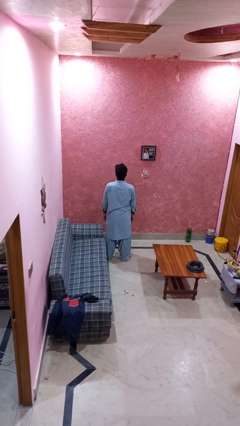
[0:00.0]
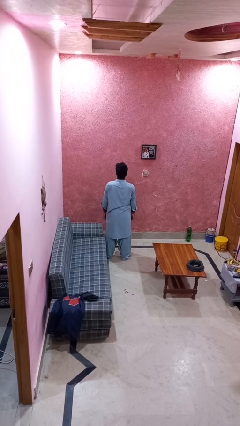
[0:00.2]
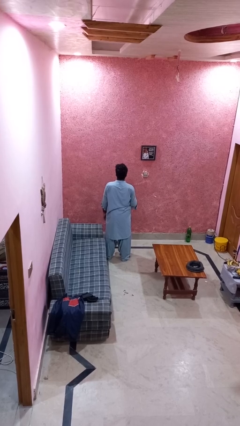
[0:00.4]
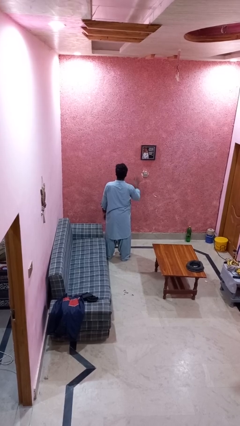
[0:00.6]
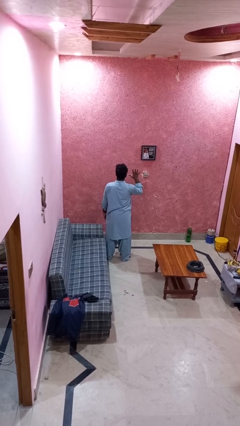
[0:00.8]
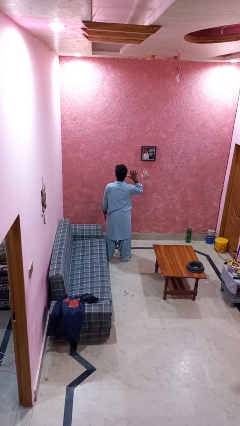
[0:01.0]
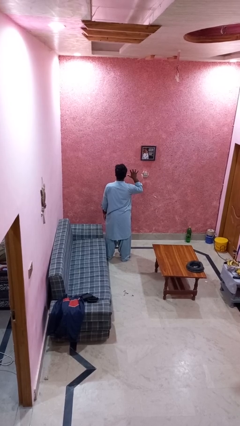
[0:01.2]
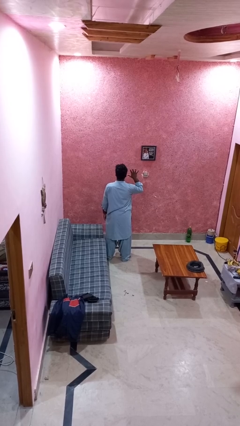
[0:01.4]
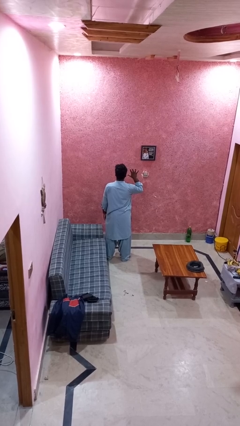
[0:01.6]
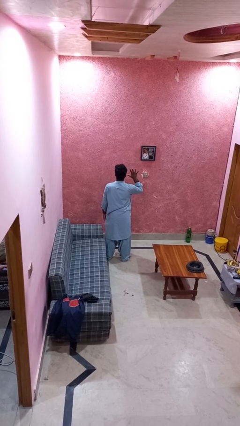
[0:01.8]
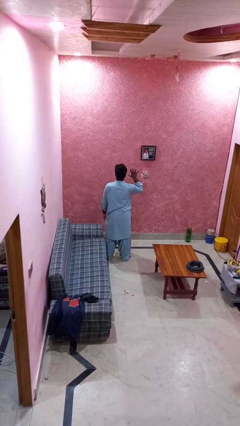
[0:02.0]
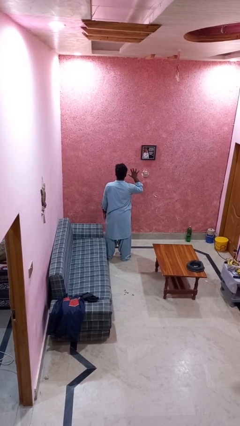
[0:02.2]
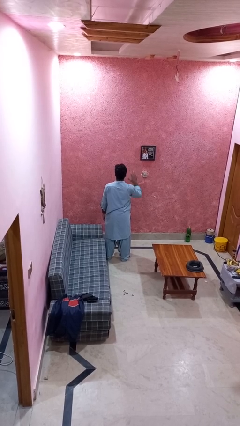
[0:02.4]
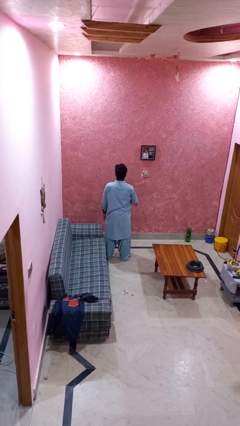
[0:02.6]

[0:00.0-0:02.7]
person gestures number five

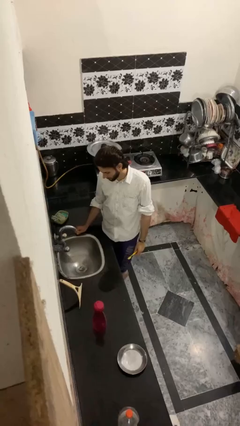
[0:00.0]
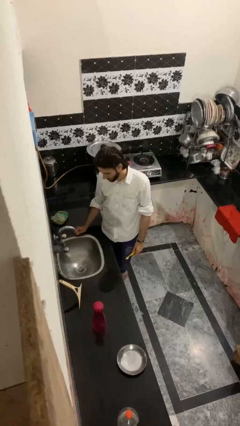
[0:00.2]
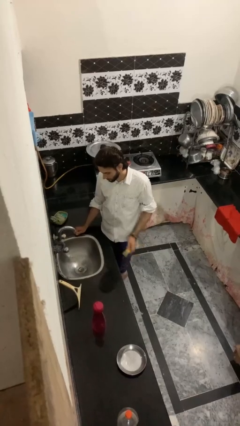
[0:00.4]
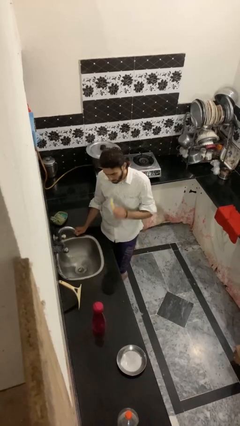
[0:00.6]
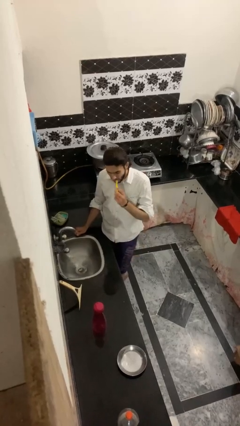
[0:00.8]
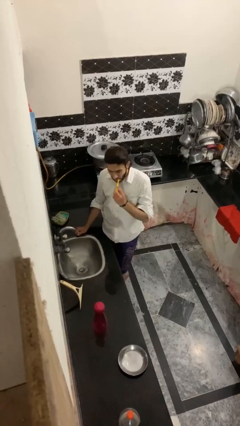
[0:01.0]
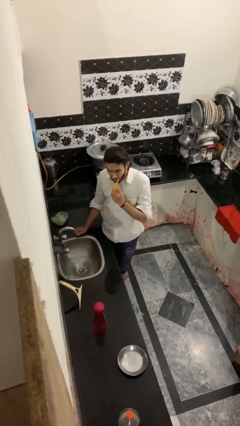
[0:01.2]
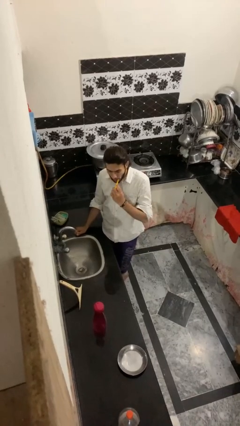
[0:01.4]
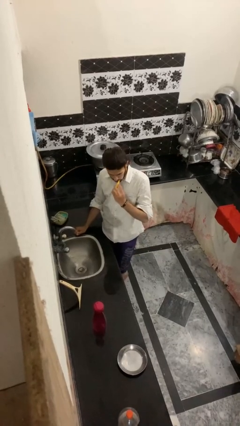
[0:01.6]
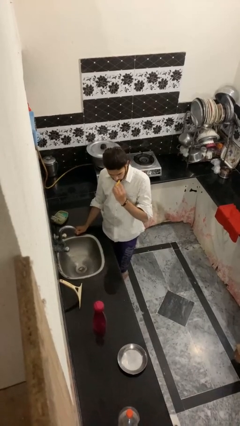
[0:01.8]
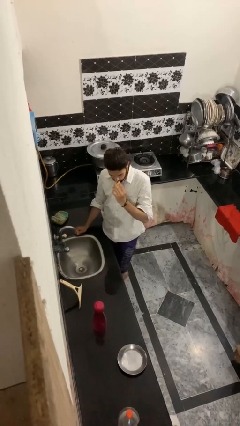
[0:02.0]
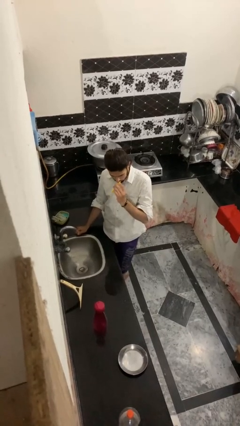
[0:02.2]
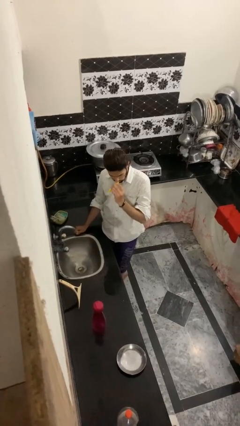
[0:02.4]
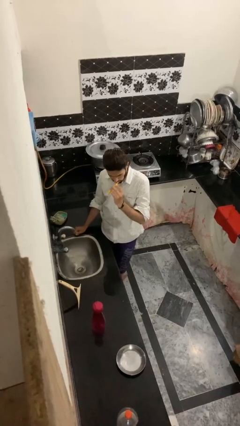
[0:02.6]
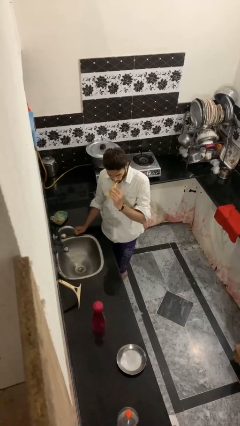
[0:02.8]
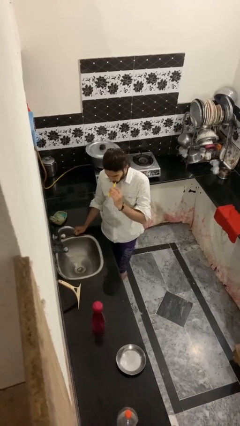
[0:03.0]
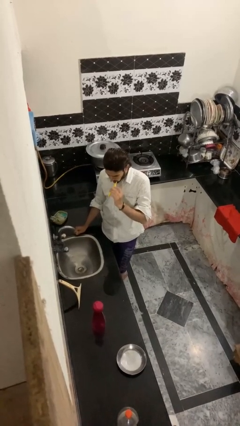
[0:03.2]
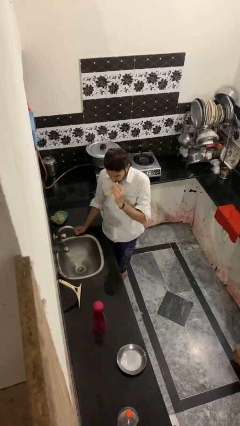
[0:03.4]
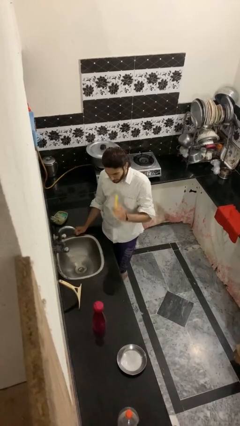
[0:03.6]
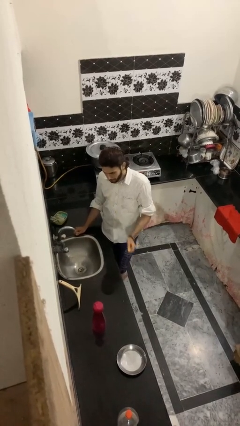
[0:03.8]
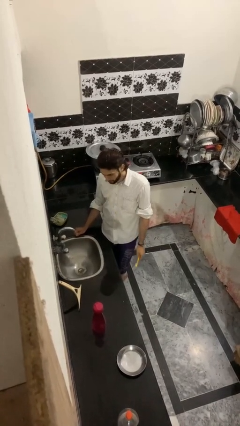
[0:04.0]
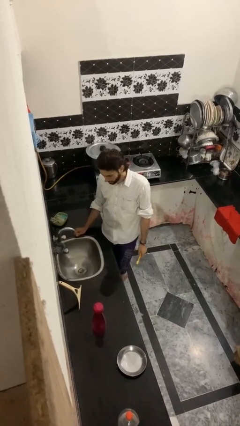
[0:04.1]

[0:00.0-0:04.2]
person brushes teeth

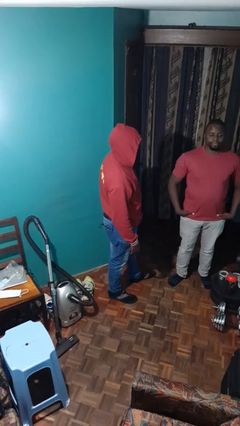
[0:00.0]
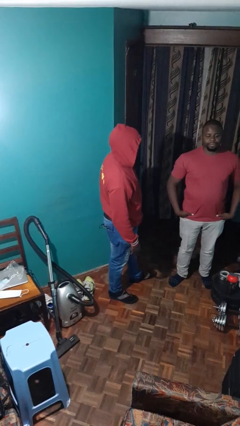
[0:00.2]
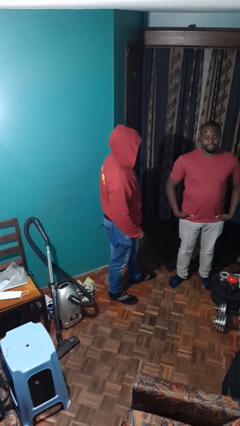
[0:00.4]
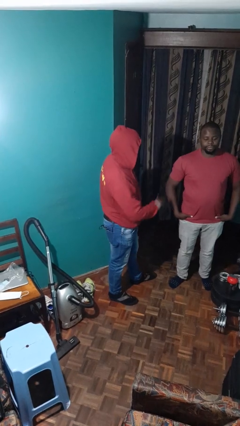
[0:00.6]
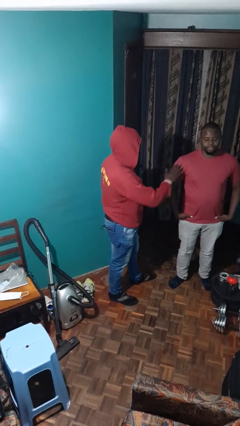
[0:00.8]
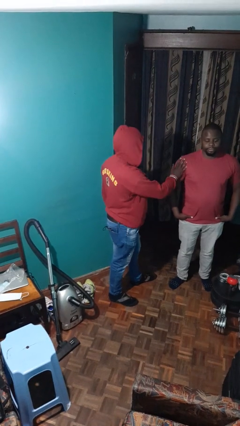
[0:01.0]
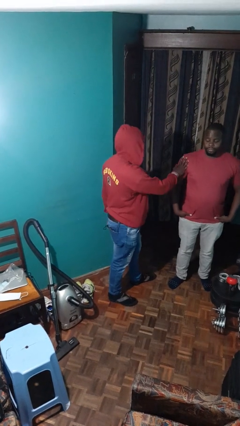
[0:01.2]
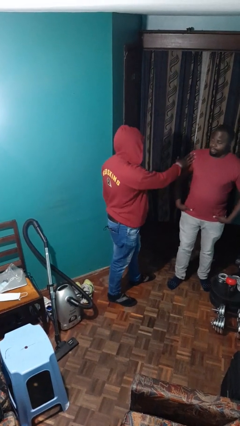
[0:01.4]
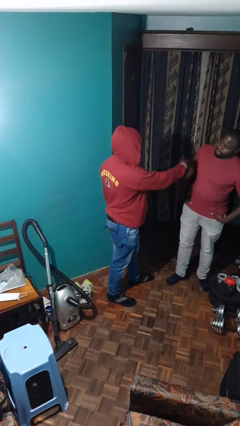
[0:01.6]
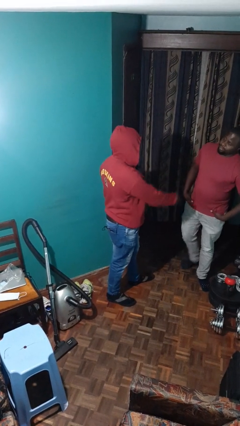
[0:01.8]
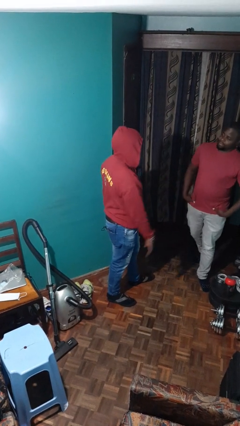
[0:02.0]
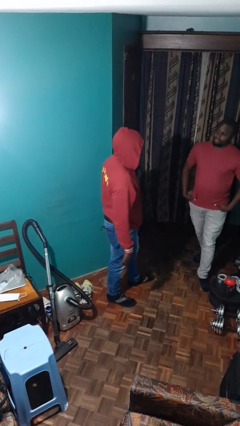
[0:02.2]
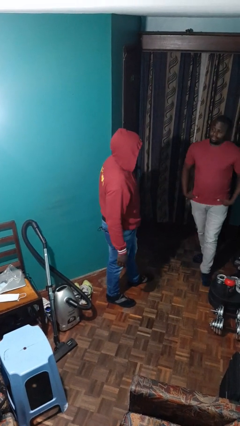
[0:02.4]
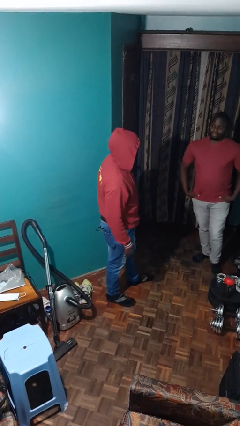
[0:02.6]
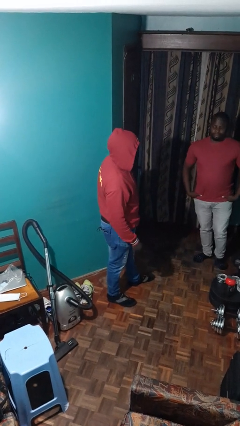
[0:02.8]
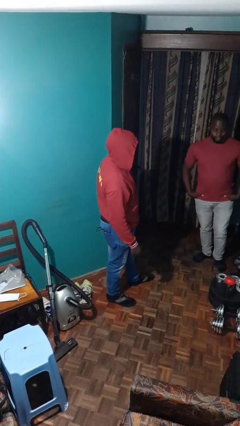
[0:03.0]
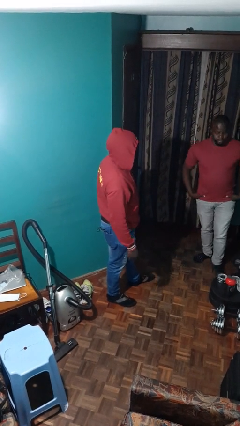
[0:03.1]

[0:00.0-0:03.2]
person shoves person

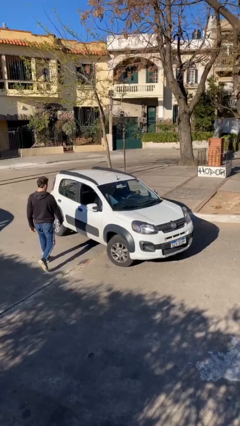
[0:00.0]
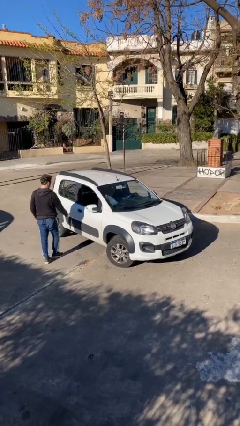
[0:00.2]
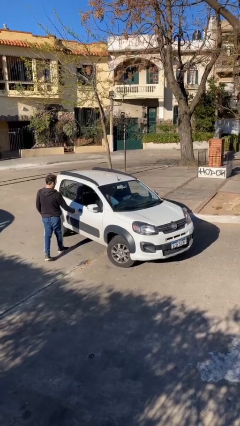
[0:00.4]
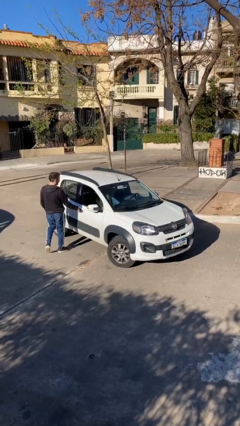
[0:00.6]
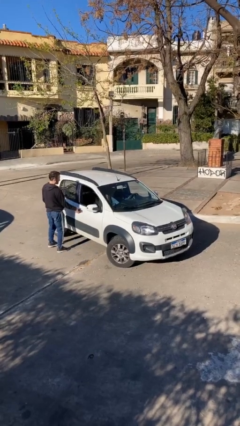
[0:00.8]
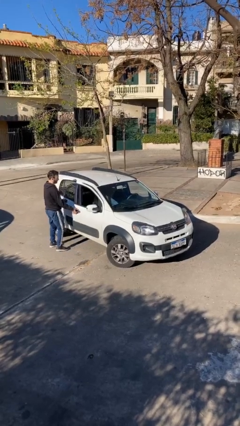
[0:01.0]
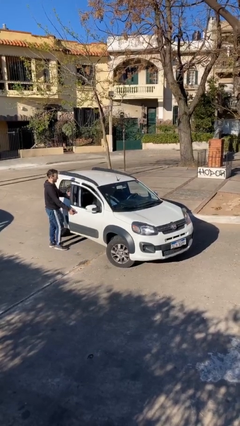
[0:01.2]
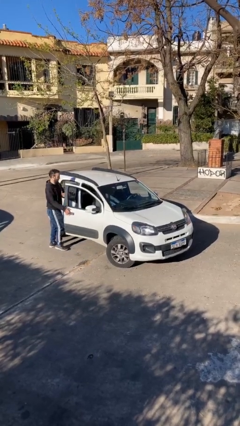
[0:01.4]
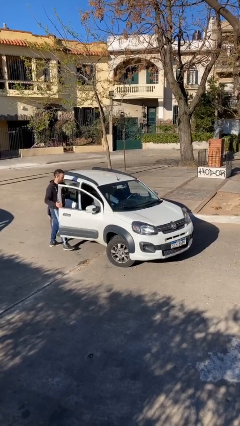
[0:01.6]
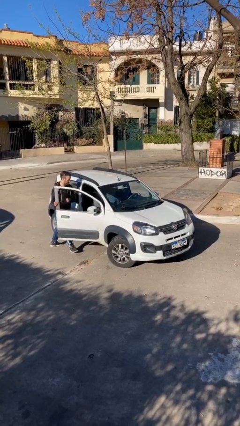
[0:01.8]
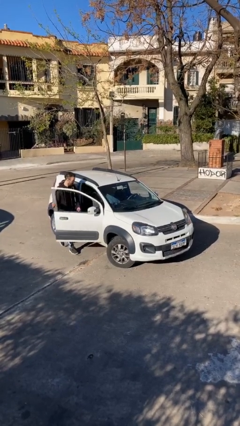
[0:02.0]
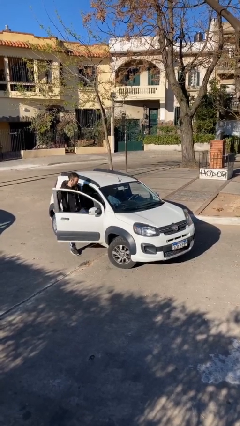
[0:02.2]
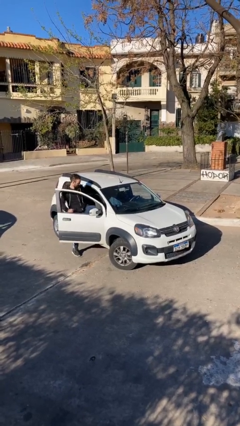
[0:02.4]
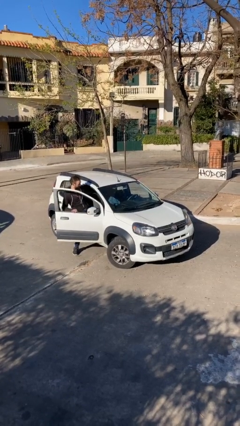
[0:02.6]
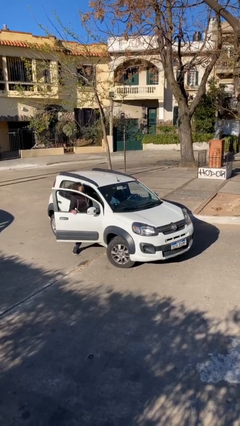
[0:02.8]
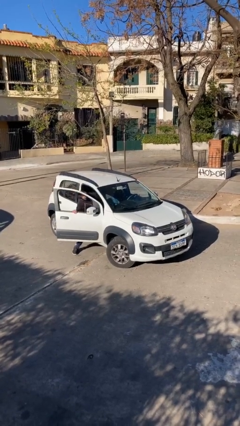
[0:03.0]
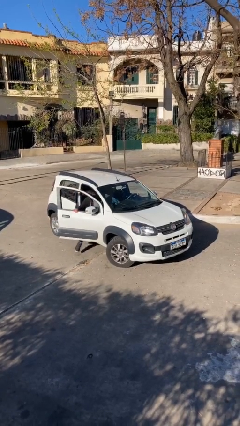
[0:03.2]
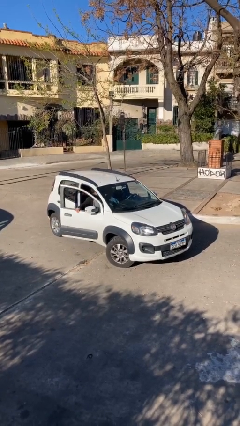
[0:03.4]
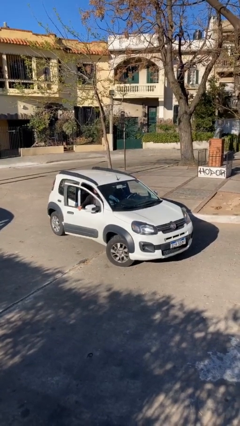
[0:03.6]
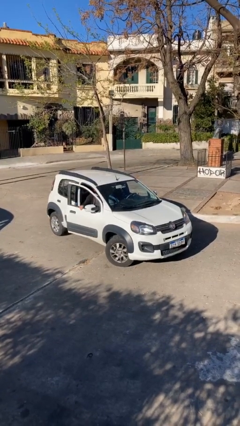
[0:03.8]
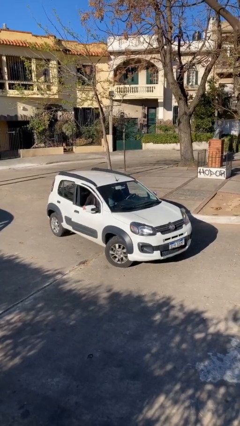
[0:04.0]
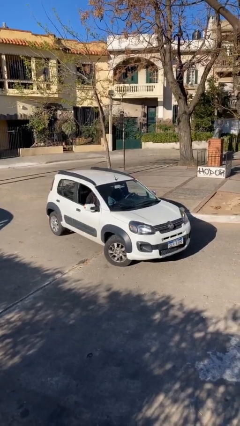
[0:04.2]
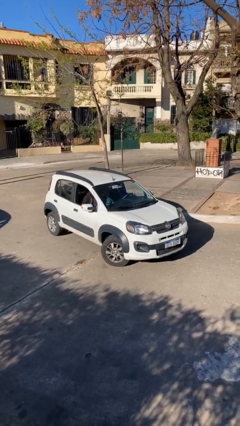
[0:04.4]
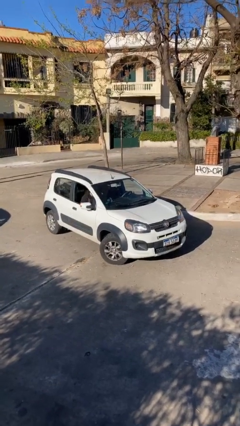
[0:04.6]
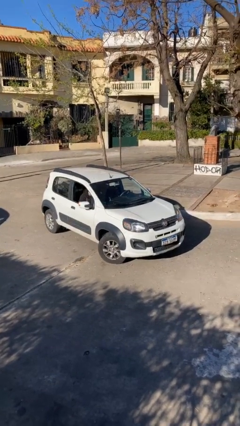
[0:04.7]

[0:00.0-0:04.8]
car picks up person

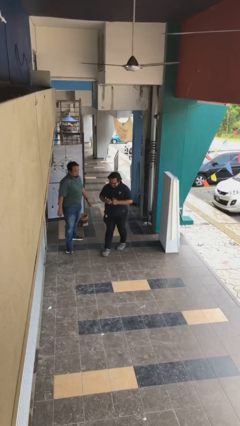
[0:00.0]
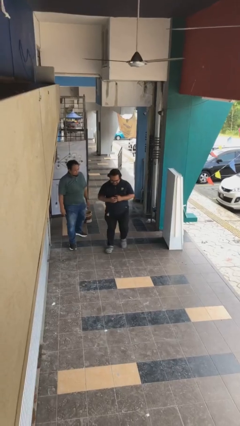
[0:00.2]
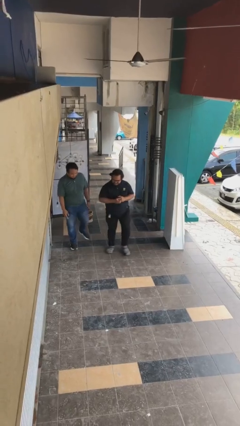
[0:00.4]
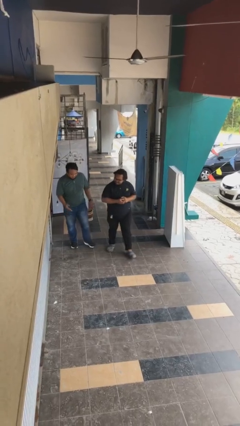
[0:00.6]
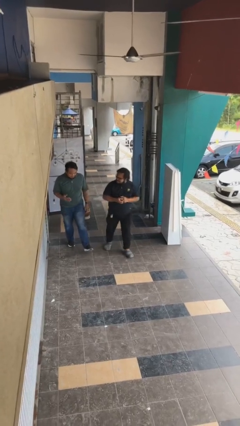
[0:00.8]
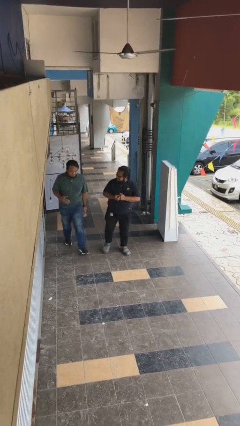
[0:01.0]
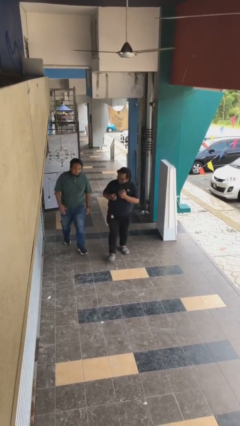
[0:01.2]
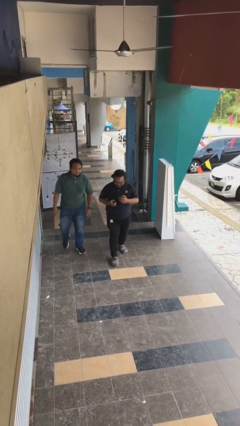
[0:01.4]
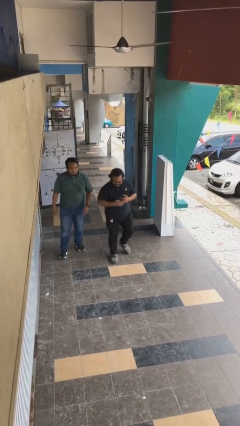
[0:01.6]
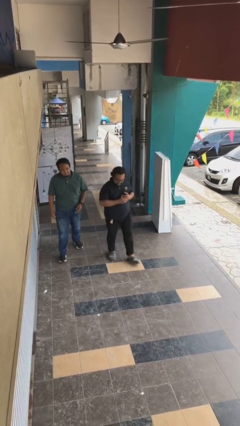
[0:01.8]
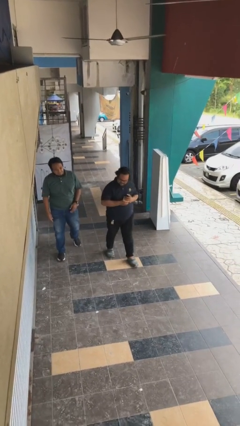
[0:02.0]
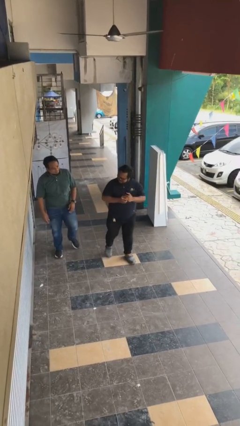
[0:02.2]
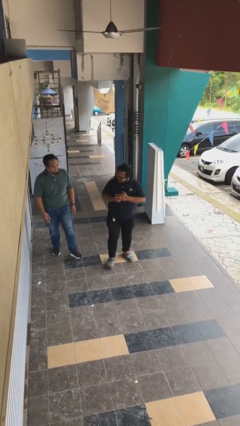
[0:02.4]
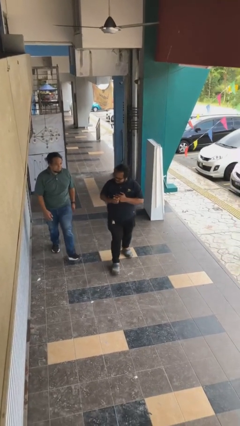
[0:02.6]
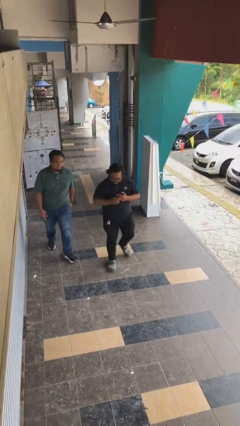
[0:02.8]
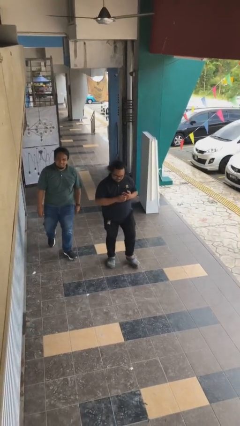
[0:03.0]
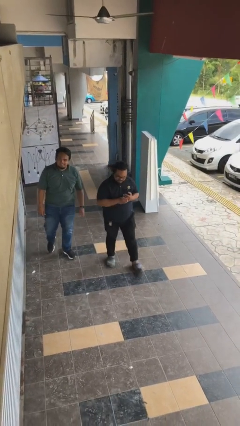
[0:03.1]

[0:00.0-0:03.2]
person talks to person
